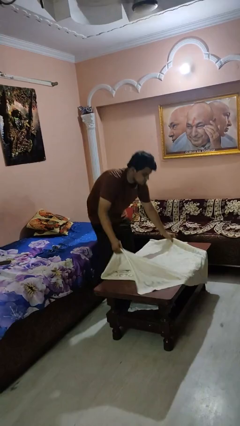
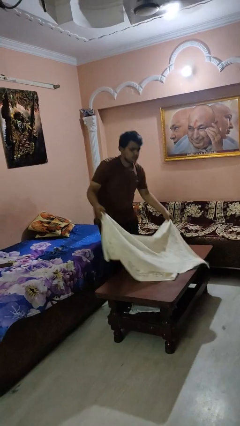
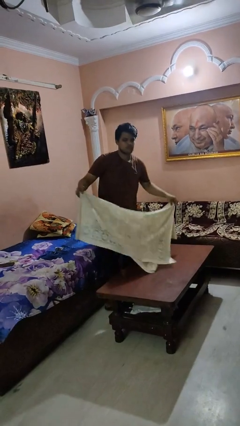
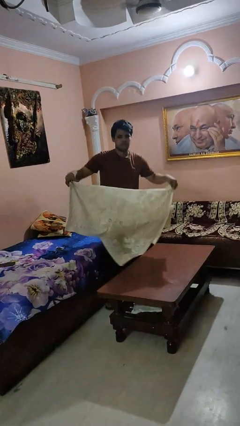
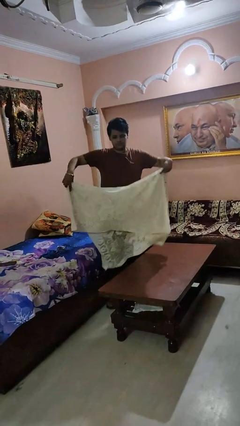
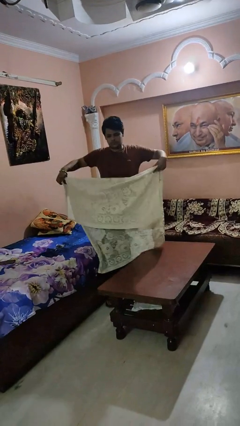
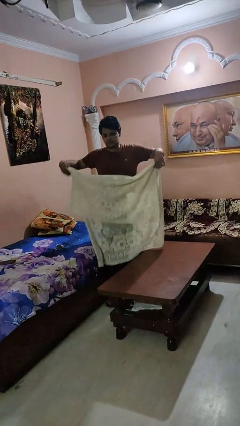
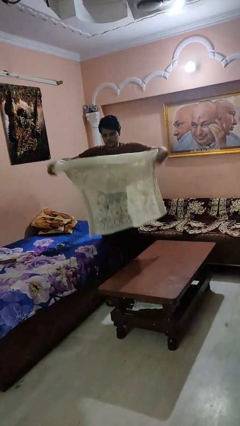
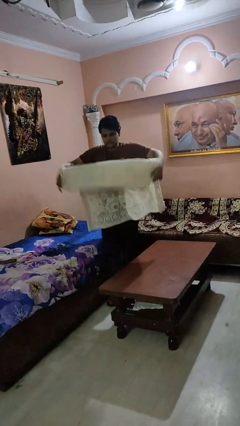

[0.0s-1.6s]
person folds tablecloth

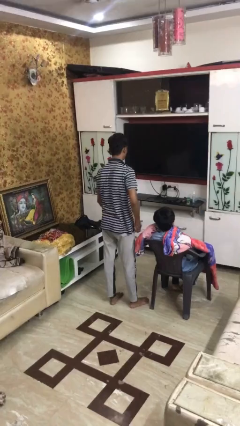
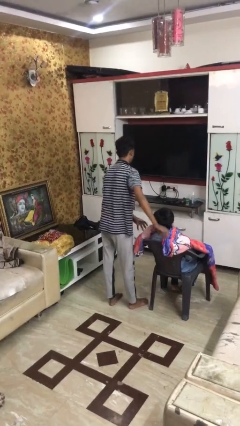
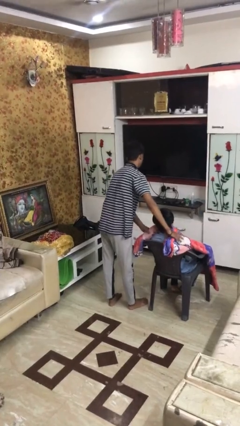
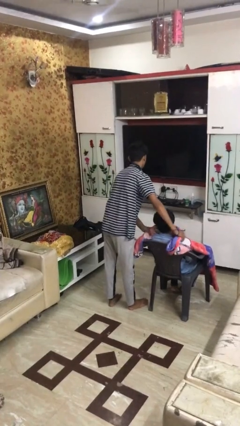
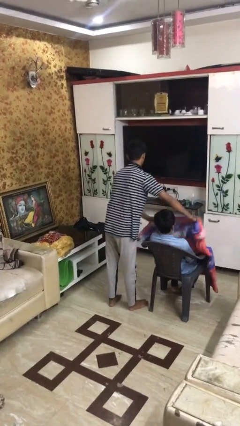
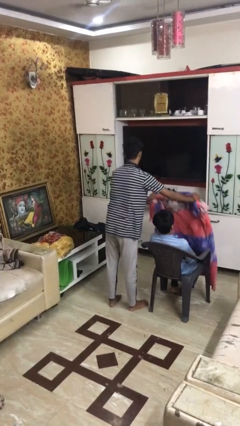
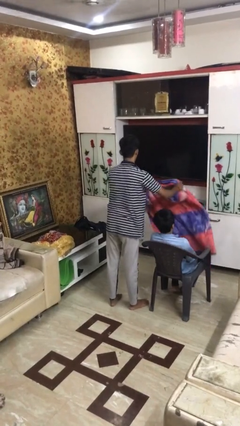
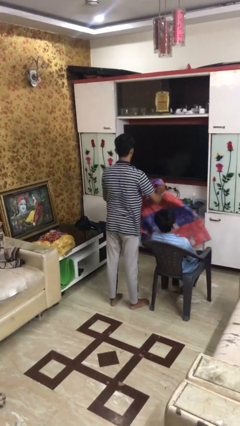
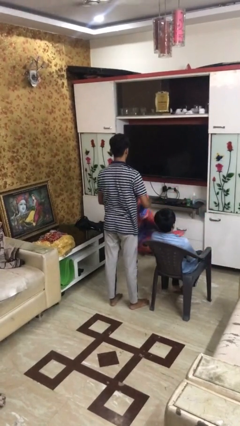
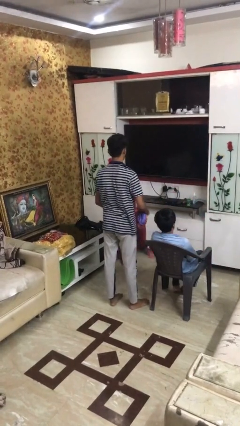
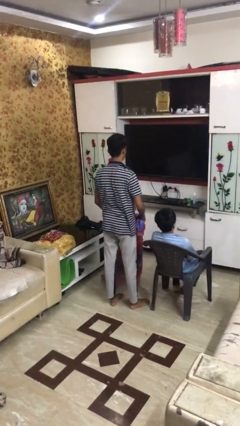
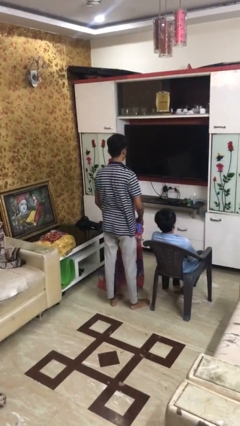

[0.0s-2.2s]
person uncovers friend with blanket

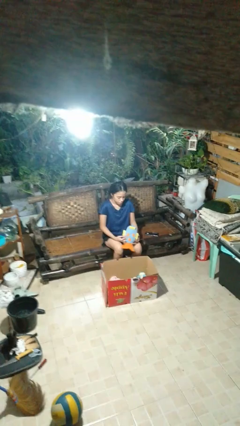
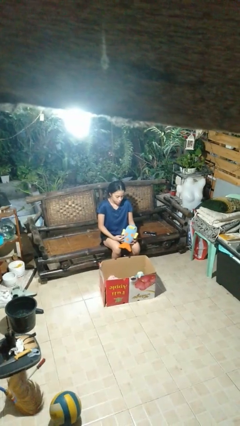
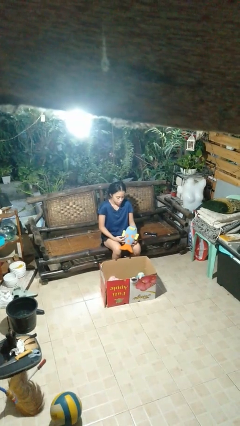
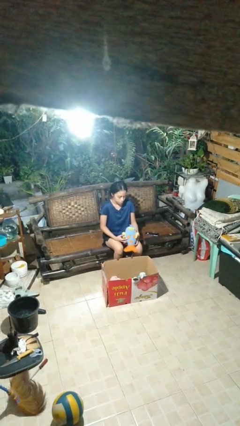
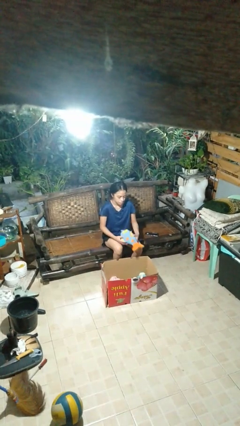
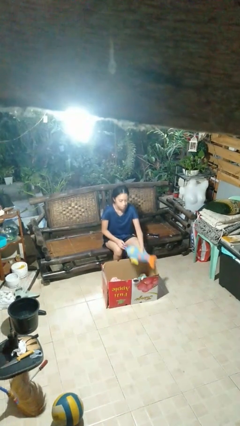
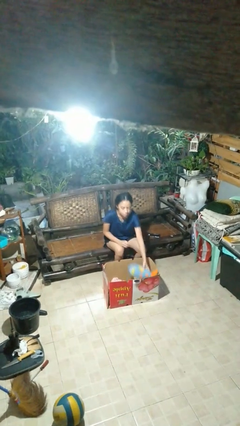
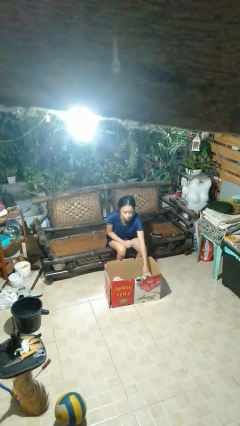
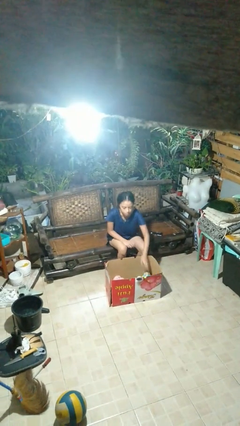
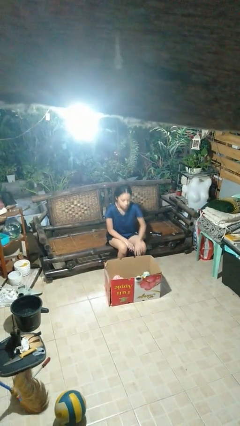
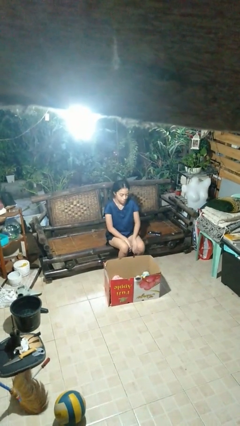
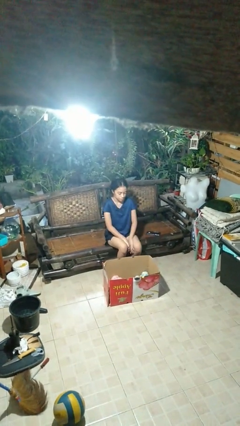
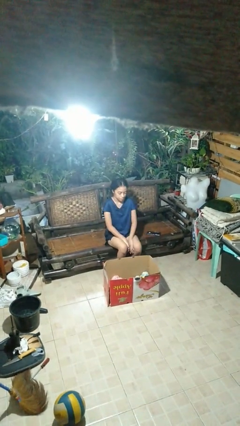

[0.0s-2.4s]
person puts object into box

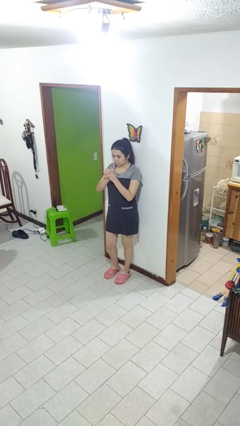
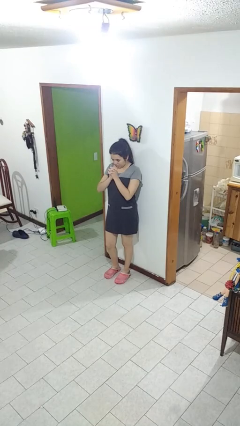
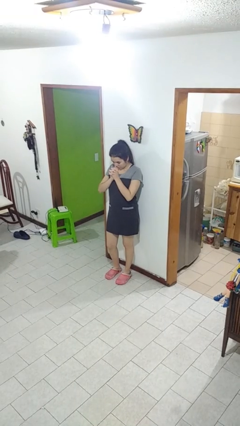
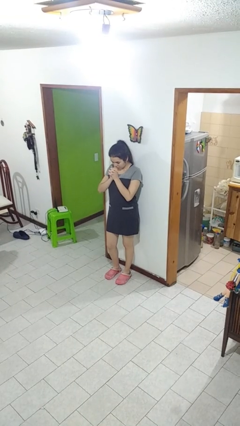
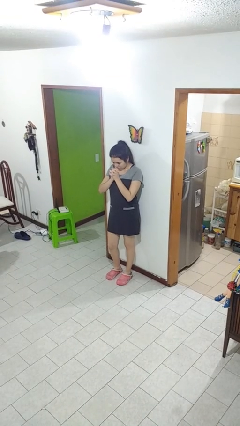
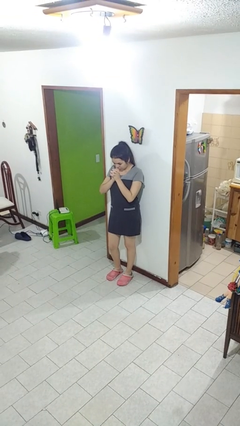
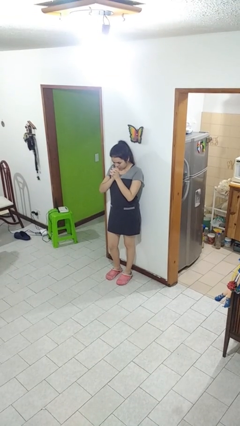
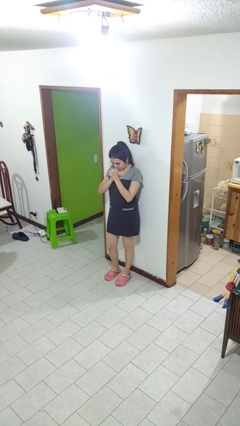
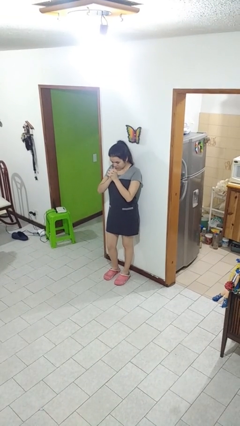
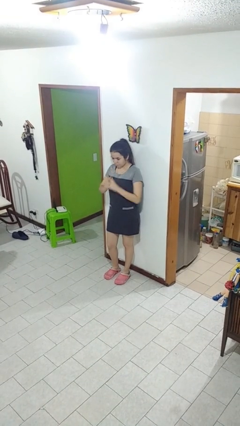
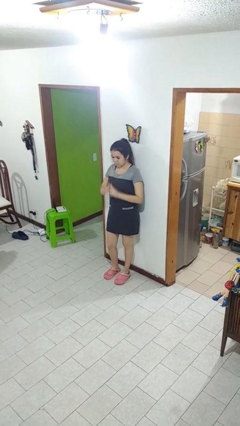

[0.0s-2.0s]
person prays

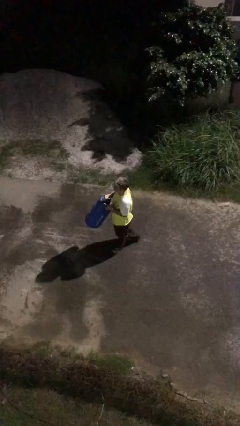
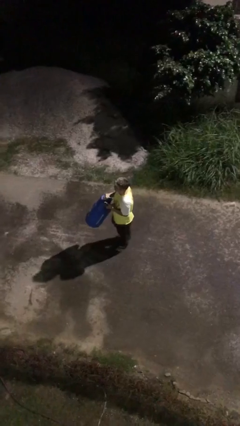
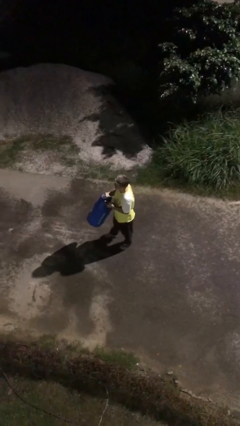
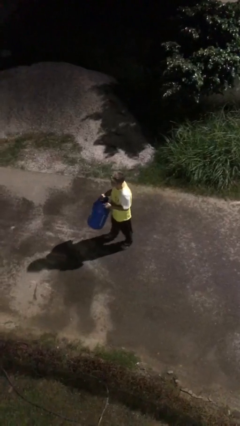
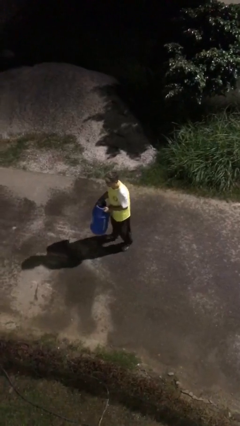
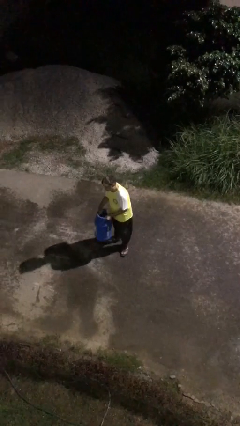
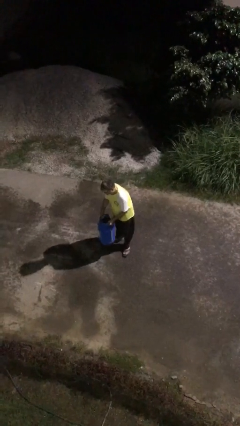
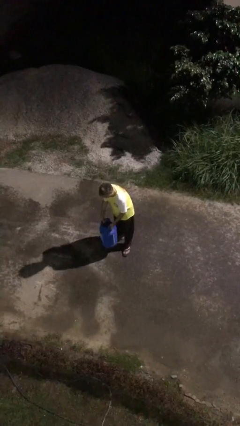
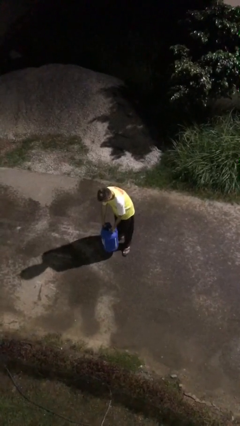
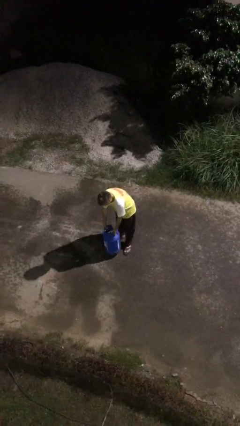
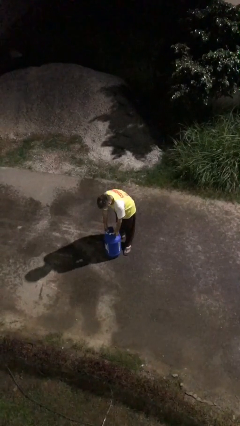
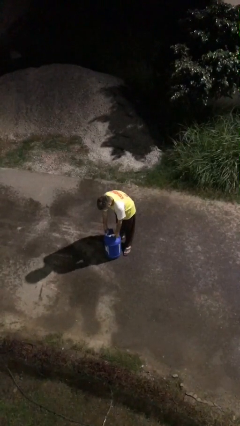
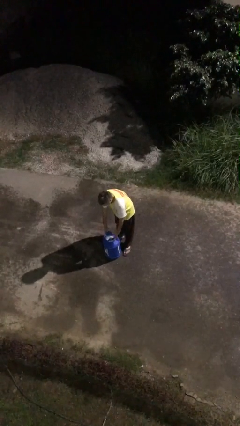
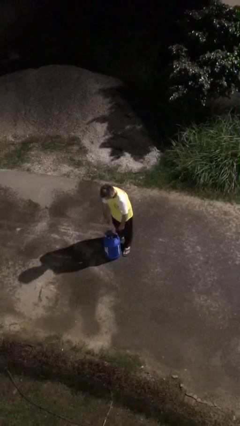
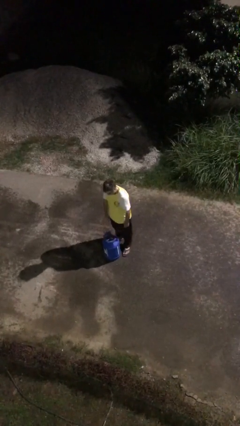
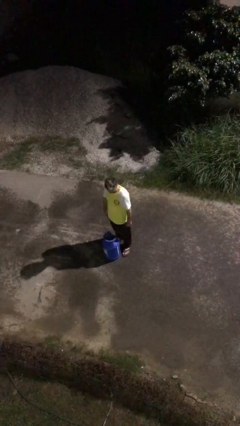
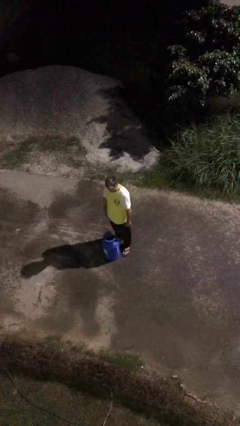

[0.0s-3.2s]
person puts down object on floor

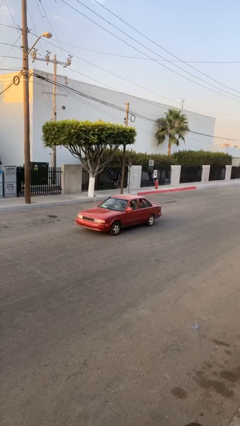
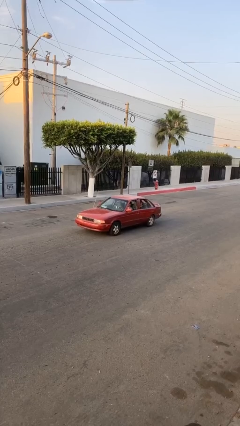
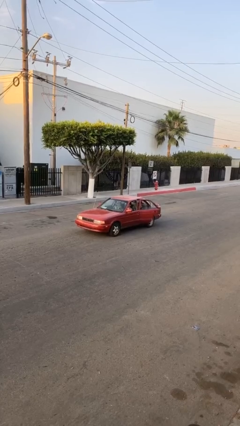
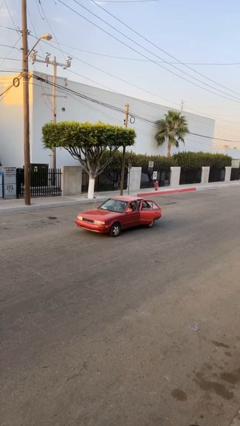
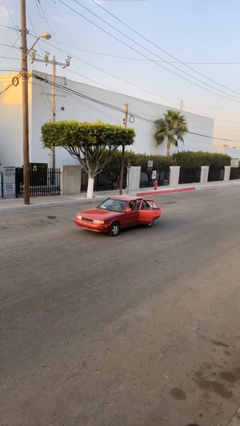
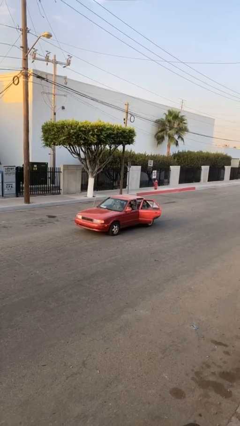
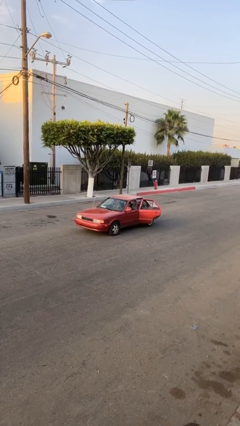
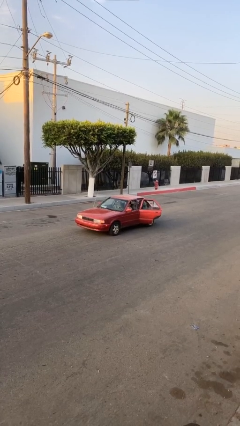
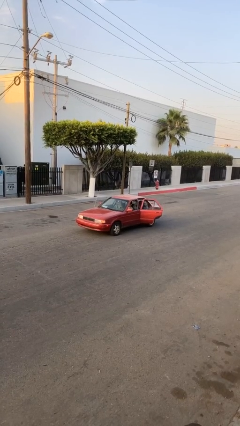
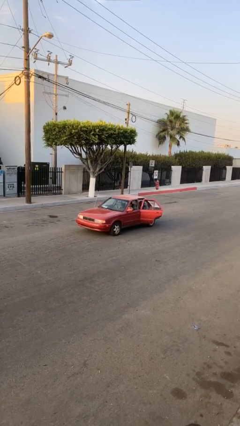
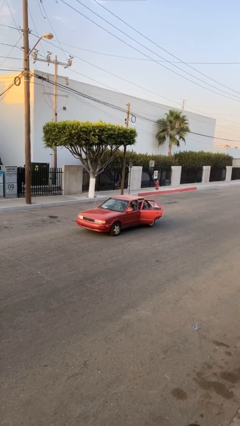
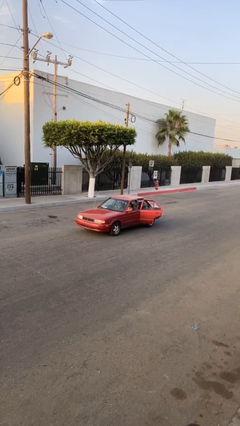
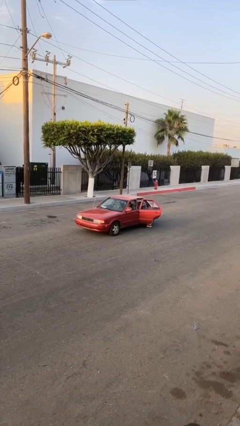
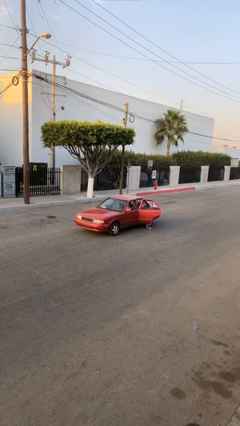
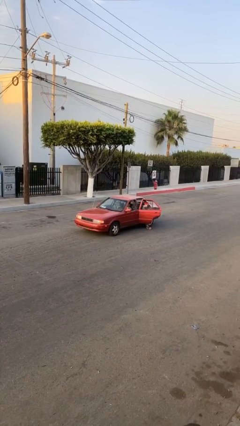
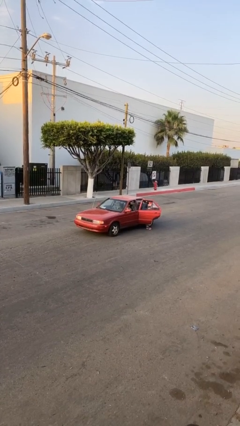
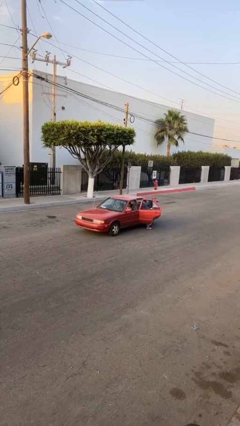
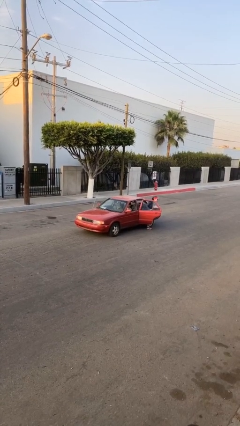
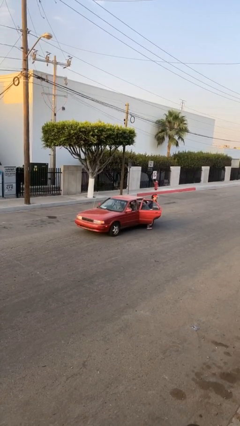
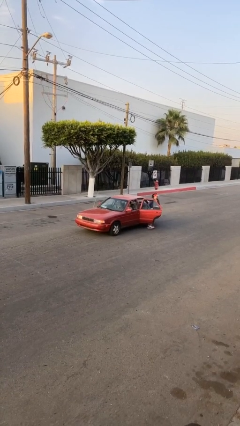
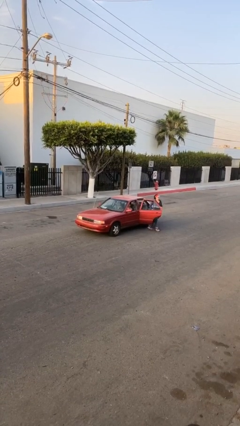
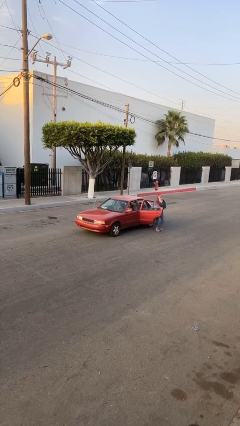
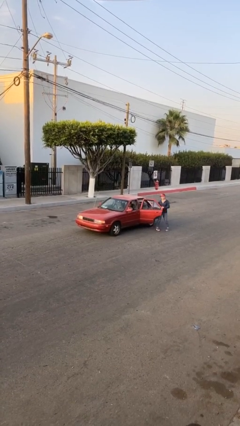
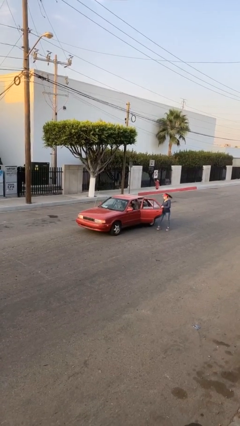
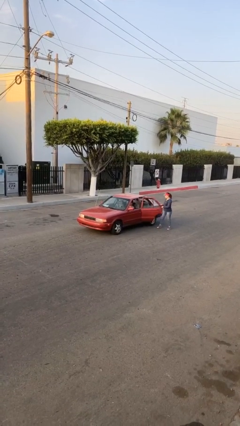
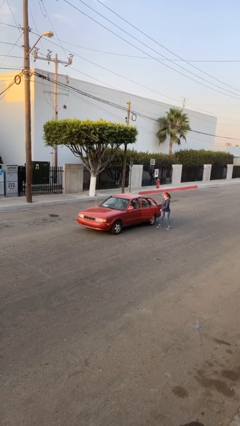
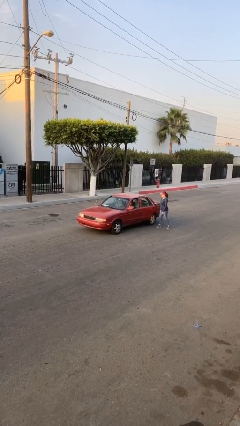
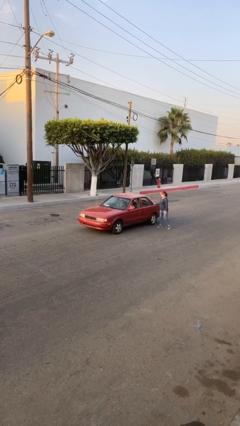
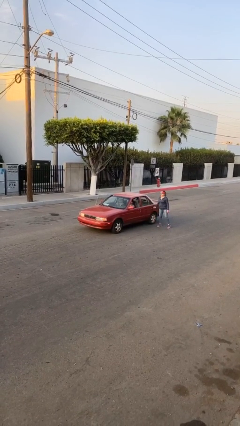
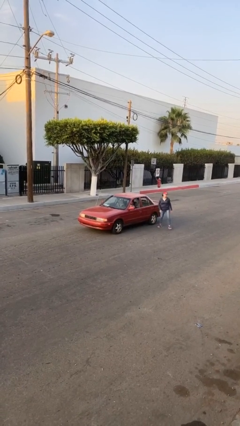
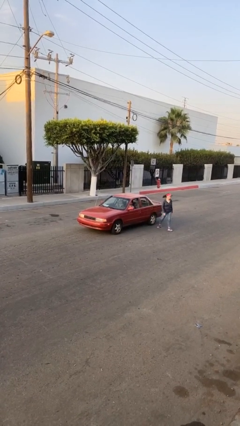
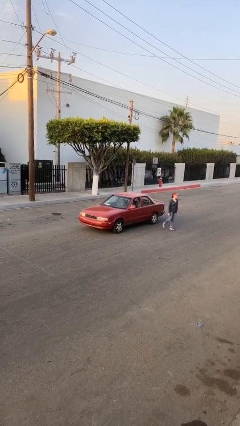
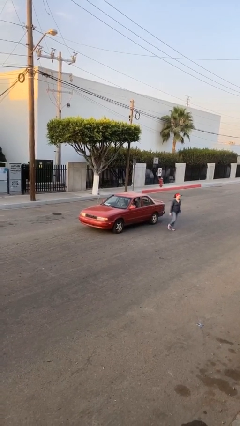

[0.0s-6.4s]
car drops off person
